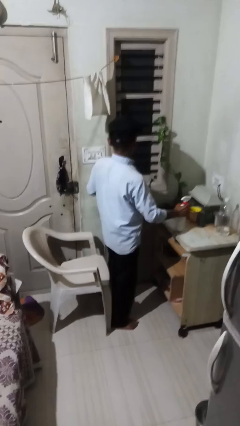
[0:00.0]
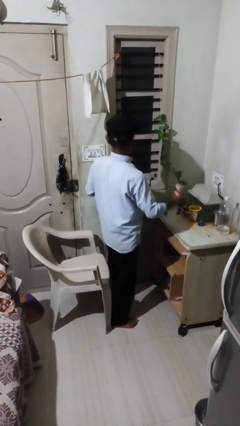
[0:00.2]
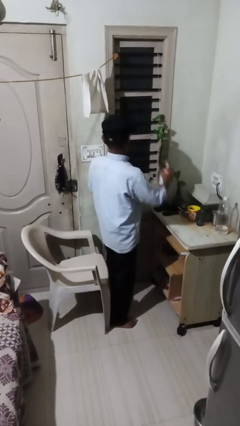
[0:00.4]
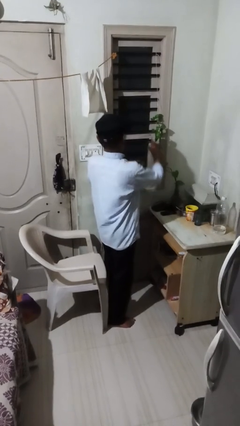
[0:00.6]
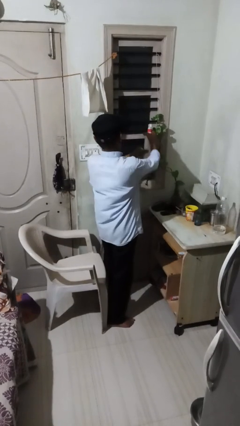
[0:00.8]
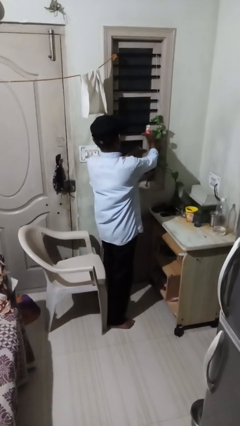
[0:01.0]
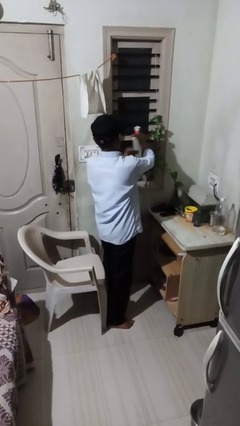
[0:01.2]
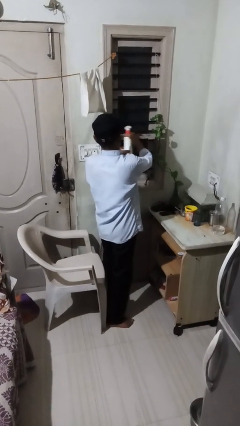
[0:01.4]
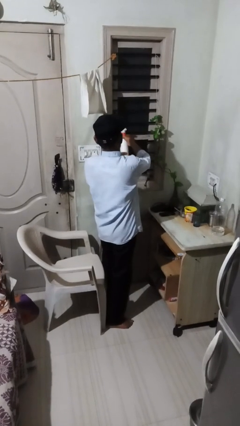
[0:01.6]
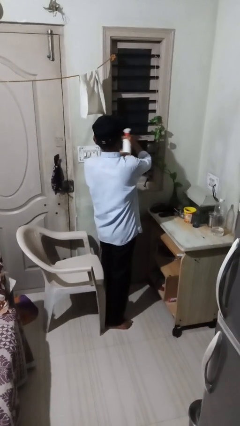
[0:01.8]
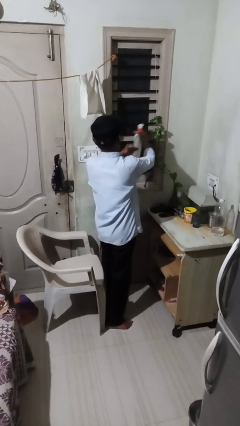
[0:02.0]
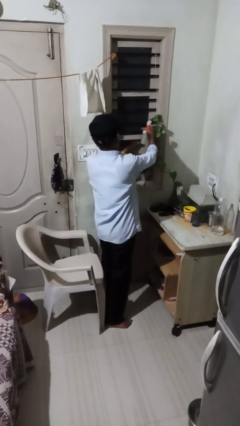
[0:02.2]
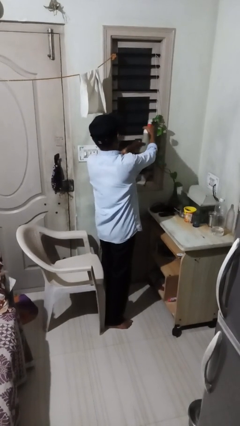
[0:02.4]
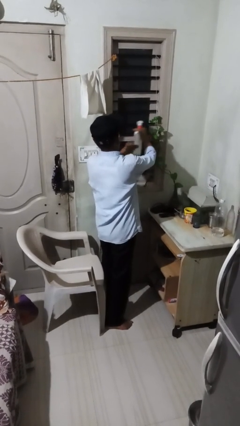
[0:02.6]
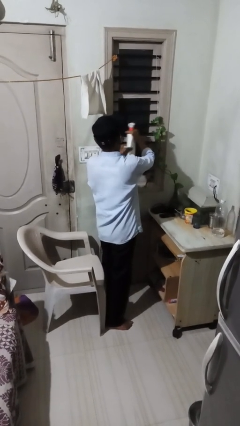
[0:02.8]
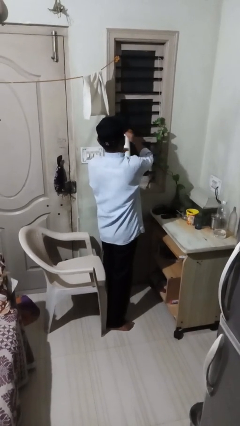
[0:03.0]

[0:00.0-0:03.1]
person sprays from bottle

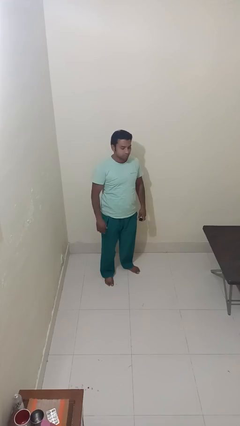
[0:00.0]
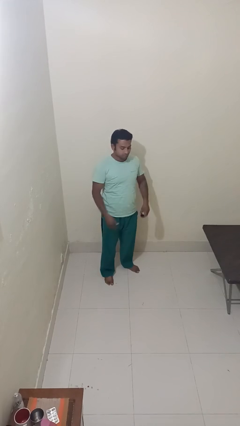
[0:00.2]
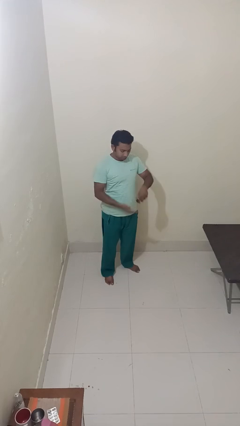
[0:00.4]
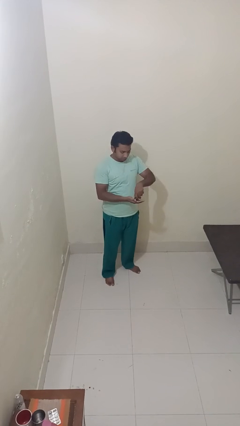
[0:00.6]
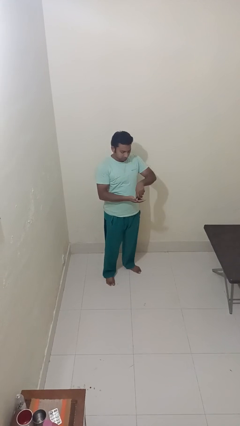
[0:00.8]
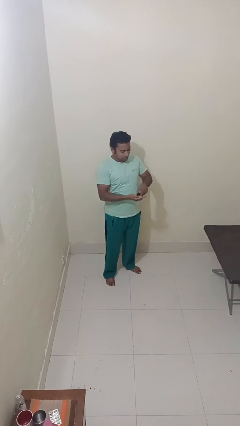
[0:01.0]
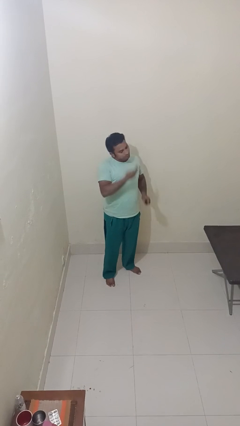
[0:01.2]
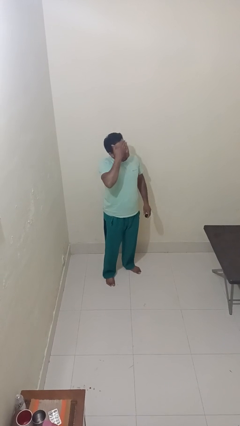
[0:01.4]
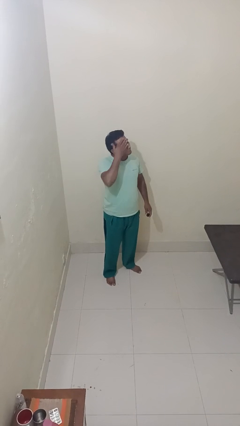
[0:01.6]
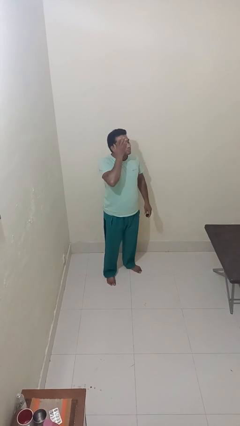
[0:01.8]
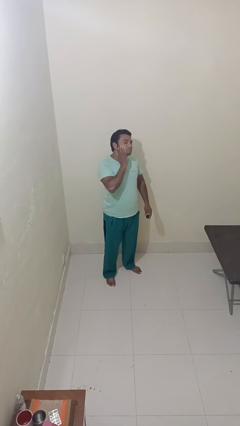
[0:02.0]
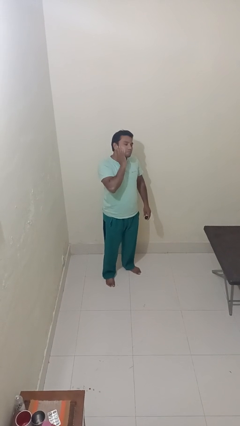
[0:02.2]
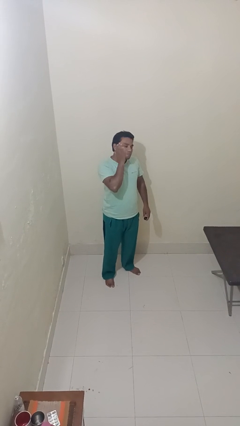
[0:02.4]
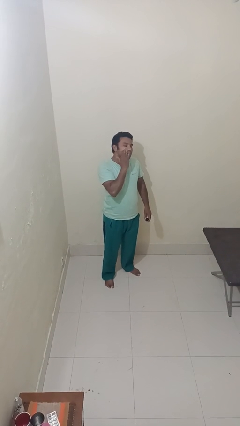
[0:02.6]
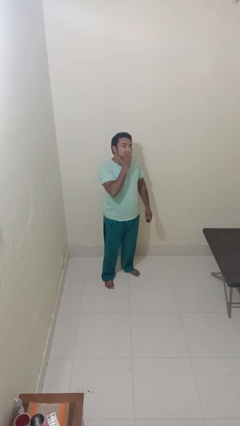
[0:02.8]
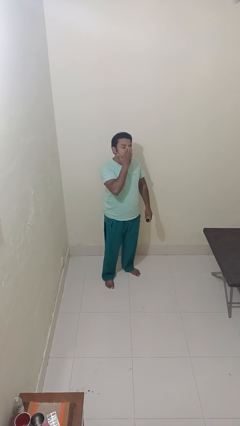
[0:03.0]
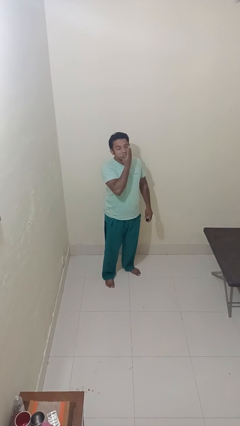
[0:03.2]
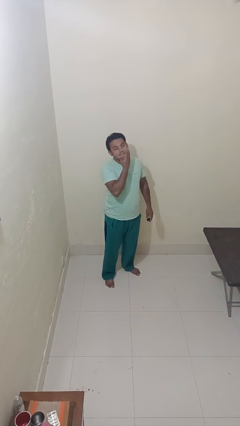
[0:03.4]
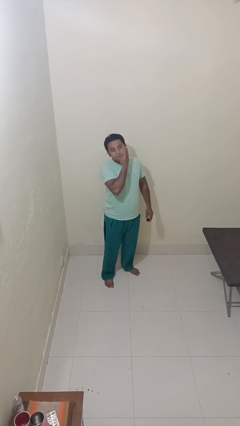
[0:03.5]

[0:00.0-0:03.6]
person applies facial moisturizer

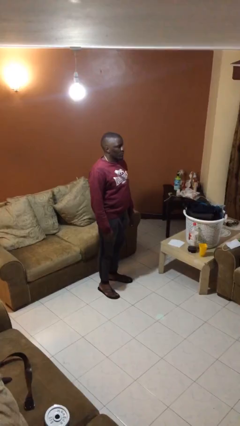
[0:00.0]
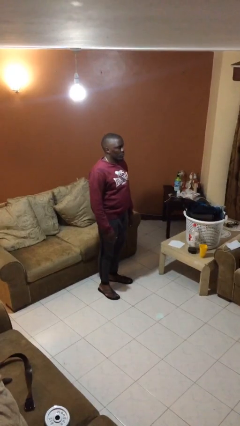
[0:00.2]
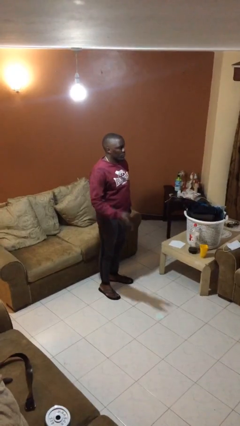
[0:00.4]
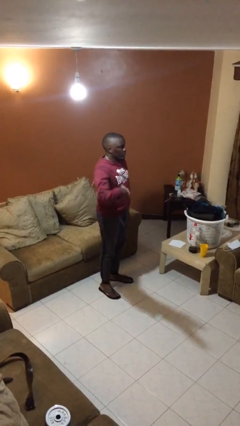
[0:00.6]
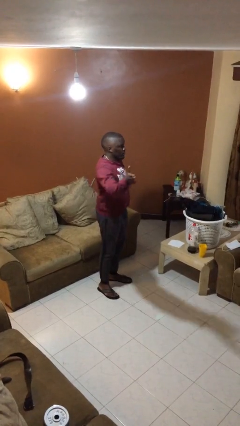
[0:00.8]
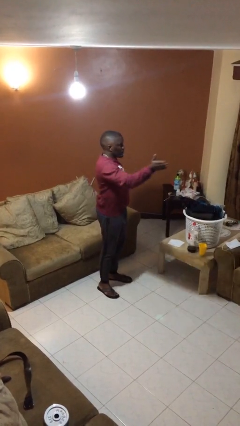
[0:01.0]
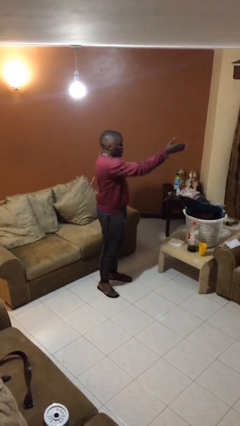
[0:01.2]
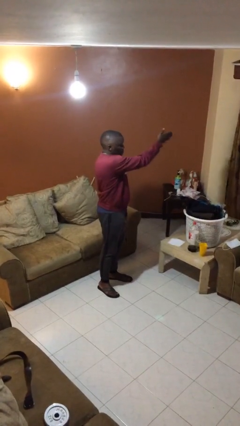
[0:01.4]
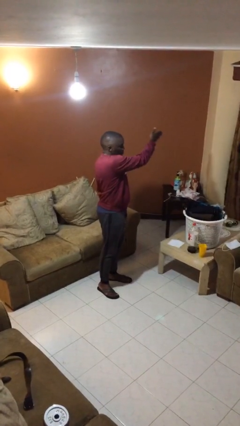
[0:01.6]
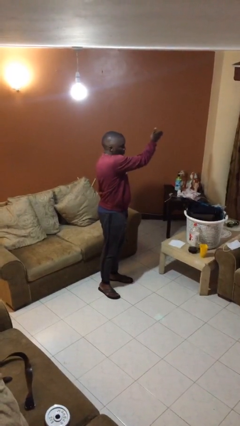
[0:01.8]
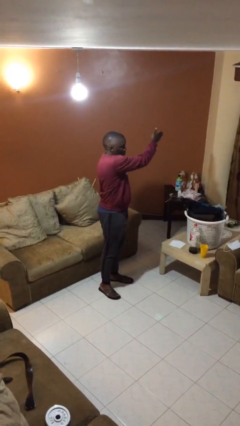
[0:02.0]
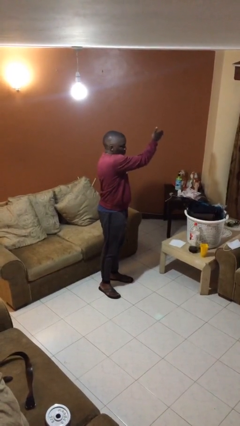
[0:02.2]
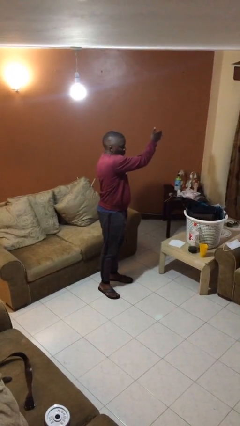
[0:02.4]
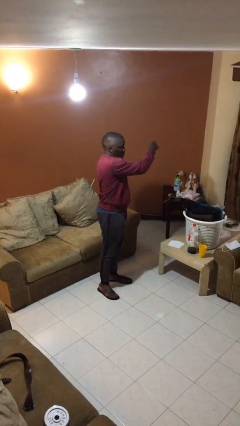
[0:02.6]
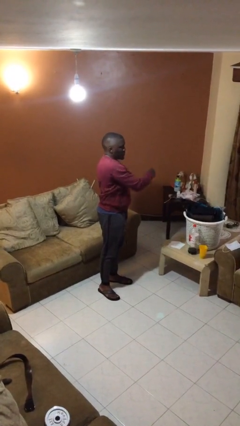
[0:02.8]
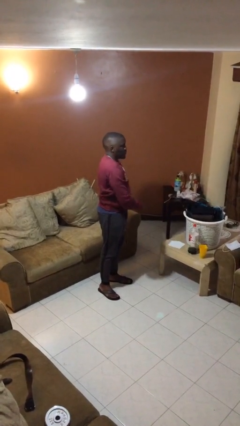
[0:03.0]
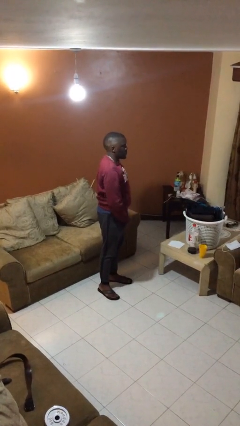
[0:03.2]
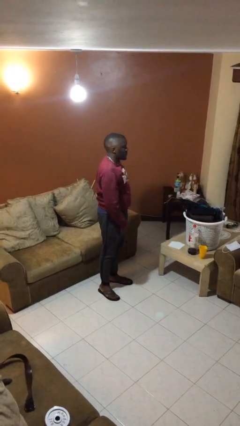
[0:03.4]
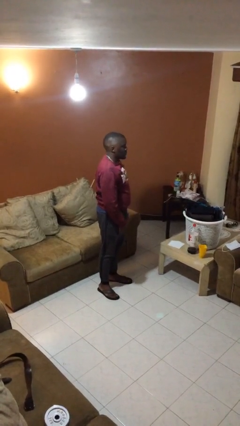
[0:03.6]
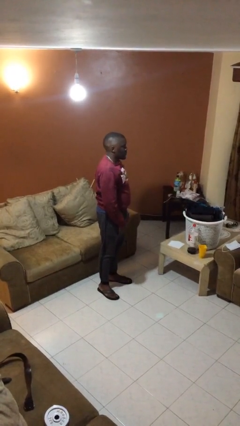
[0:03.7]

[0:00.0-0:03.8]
person gestures swipe left

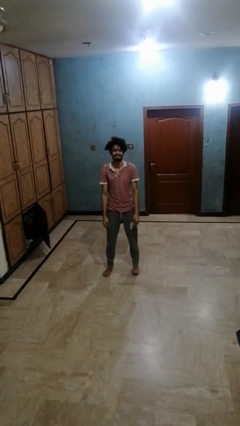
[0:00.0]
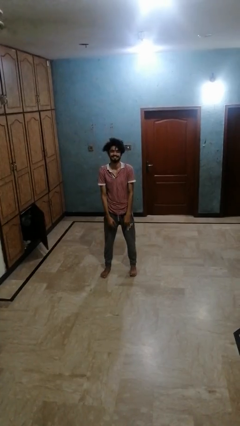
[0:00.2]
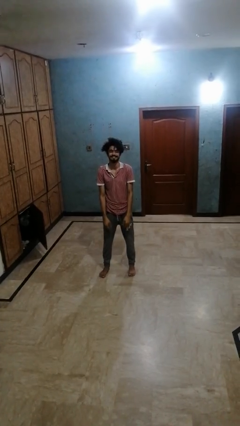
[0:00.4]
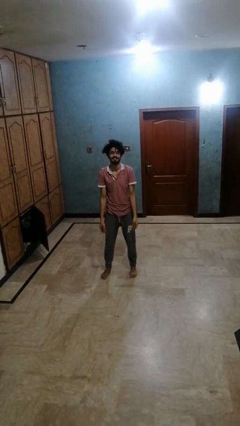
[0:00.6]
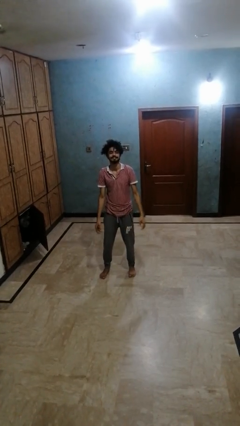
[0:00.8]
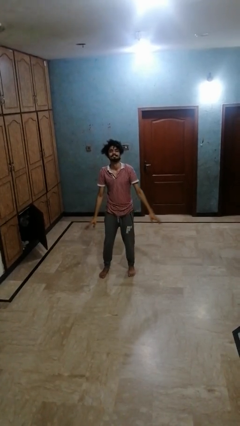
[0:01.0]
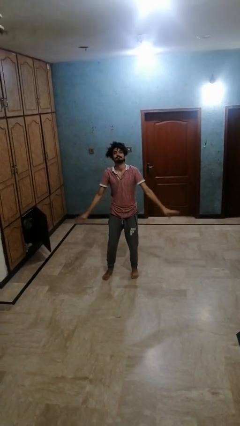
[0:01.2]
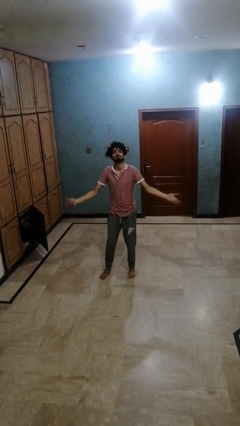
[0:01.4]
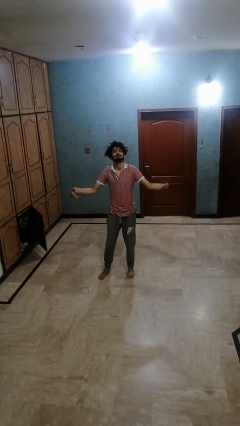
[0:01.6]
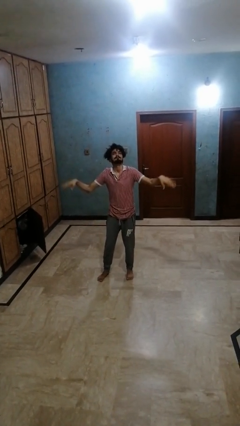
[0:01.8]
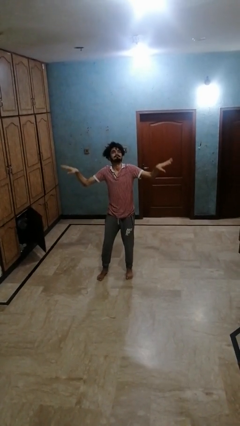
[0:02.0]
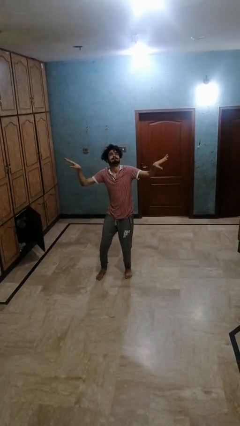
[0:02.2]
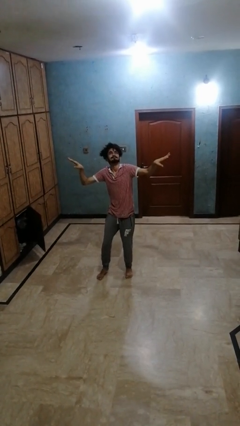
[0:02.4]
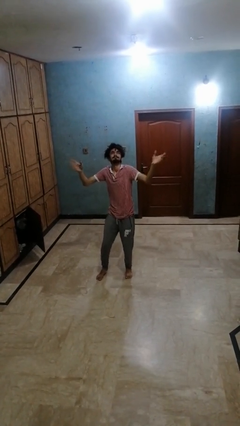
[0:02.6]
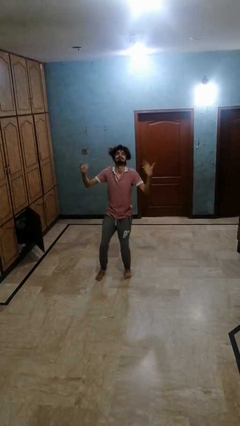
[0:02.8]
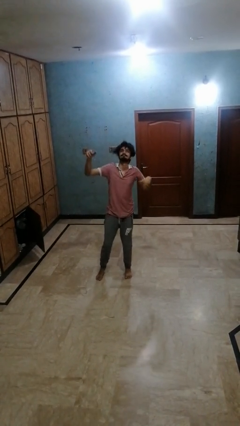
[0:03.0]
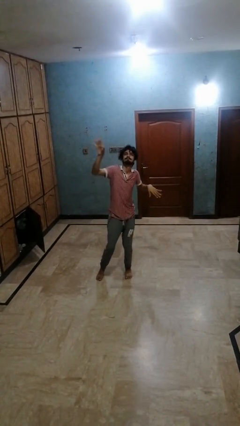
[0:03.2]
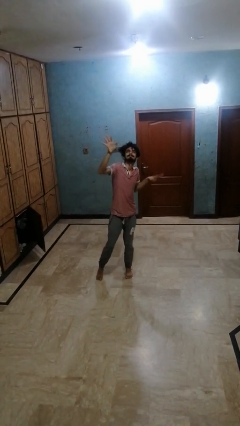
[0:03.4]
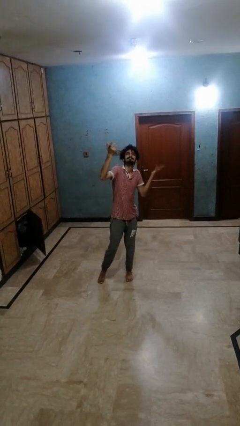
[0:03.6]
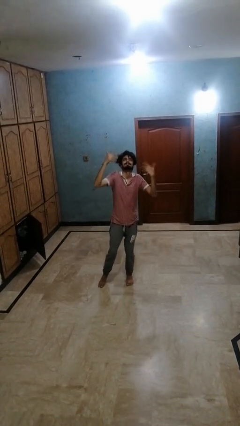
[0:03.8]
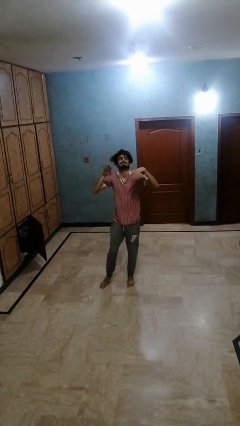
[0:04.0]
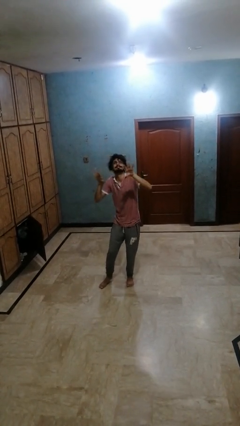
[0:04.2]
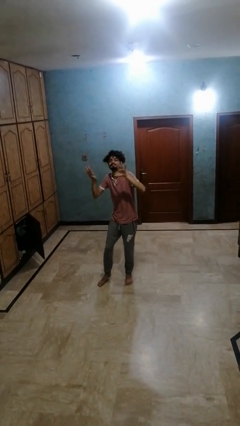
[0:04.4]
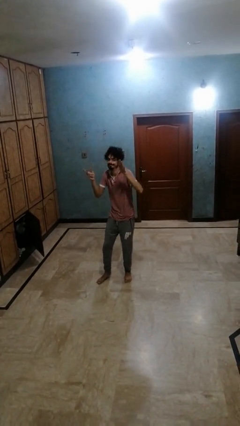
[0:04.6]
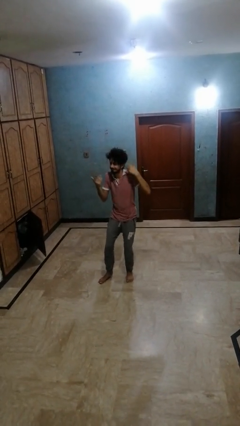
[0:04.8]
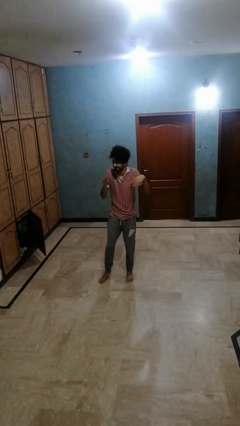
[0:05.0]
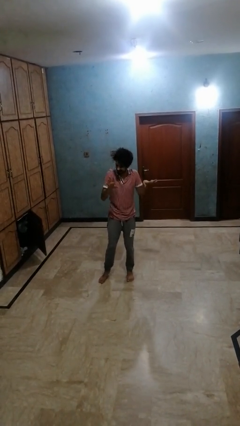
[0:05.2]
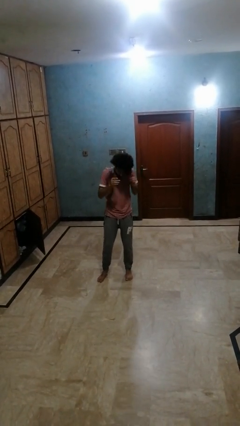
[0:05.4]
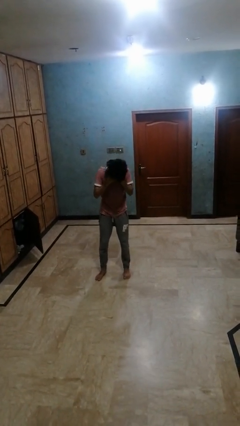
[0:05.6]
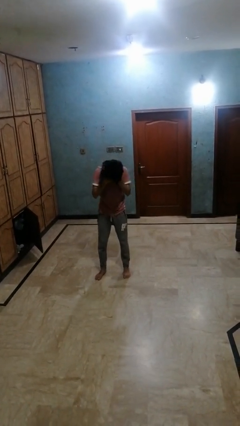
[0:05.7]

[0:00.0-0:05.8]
person dances in place

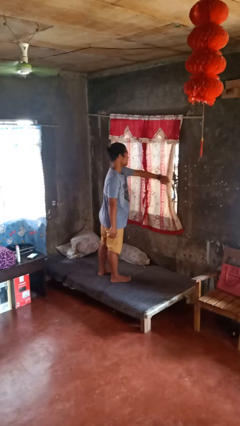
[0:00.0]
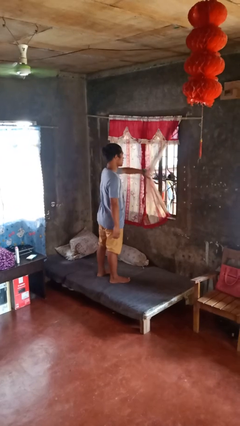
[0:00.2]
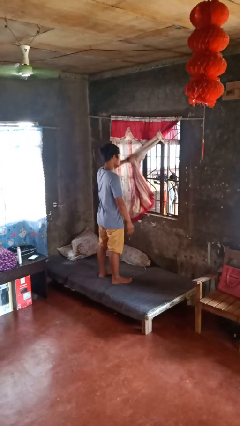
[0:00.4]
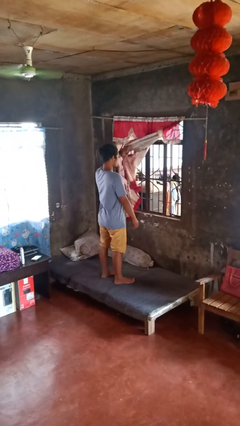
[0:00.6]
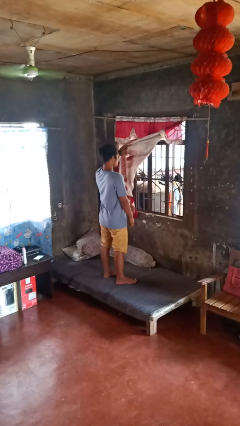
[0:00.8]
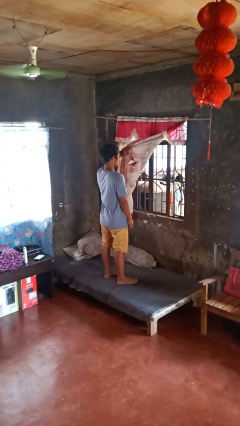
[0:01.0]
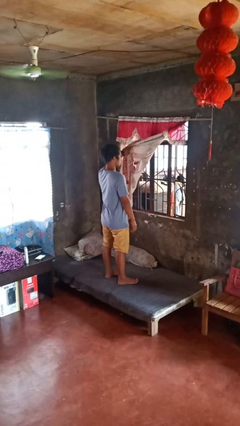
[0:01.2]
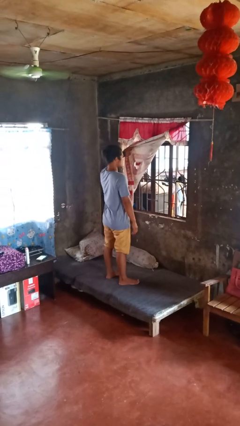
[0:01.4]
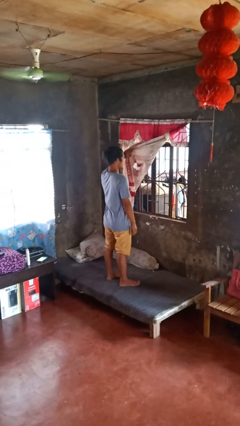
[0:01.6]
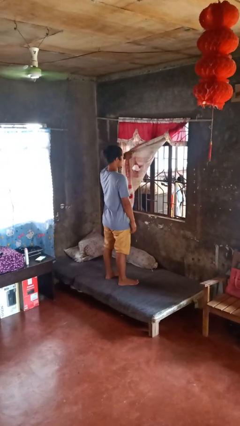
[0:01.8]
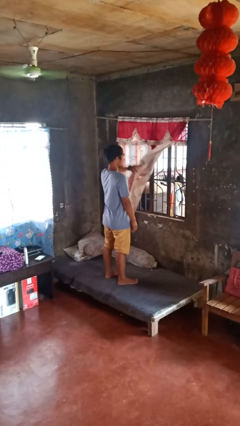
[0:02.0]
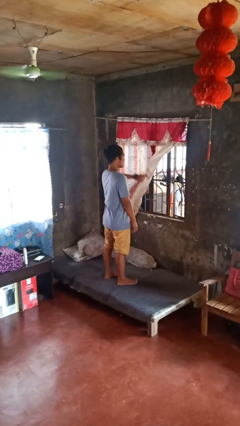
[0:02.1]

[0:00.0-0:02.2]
person opens curtains
